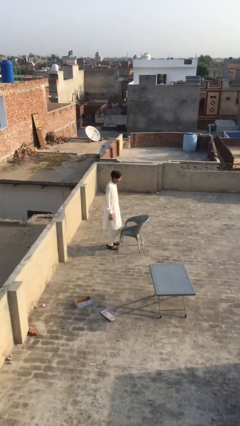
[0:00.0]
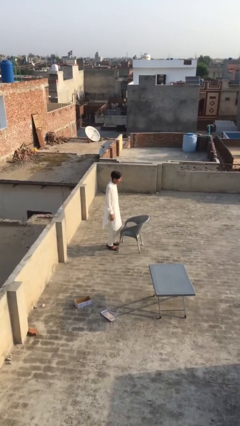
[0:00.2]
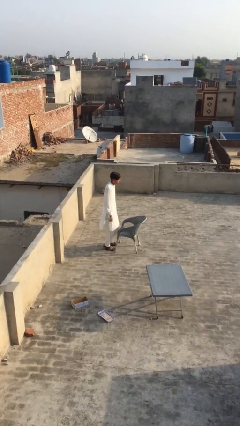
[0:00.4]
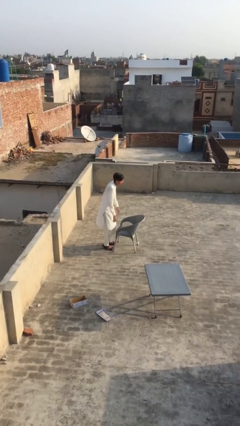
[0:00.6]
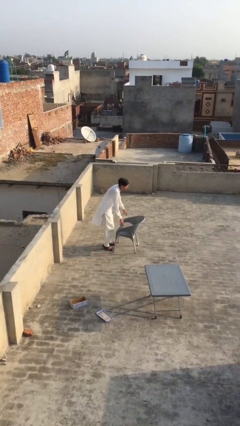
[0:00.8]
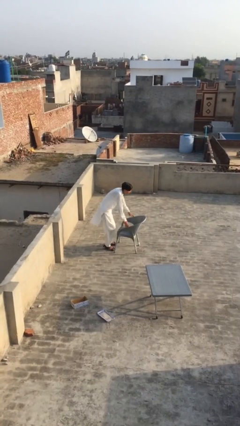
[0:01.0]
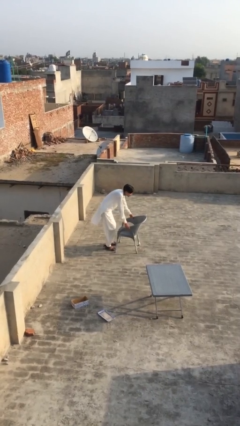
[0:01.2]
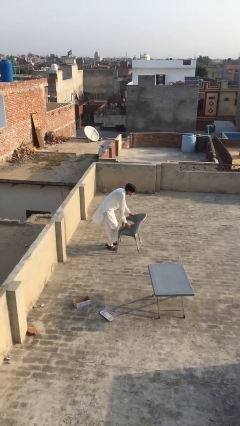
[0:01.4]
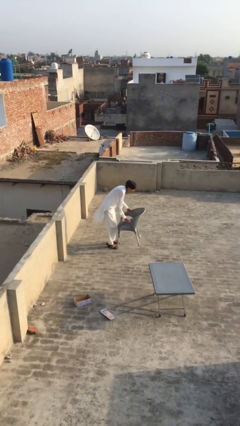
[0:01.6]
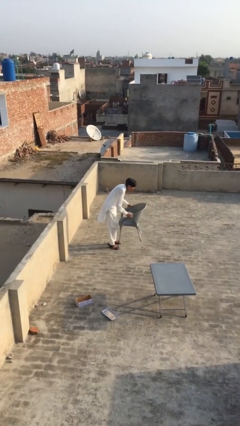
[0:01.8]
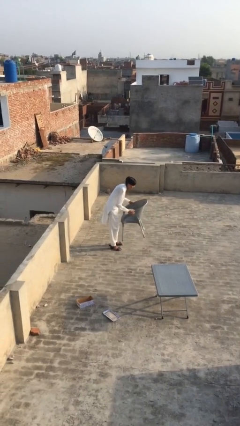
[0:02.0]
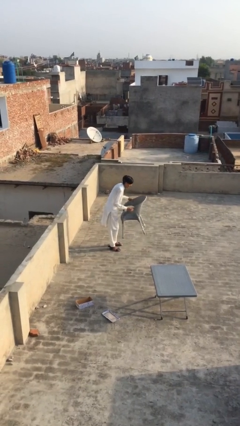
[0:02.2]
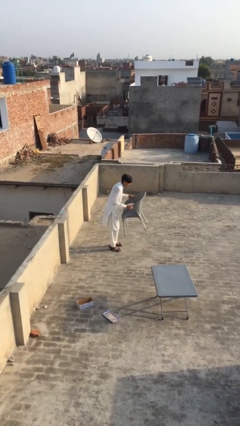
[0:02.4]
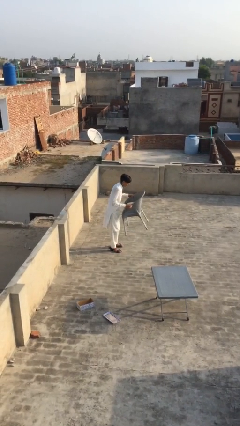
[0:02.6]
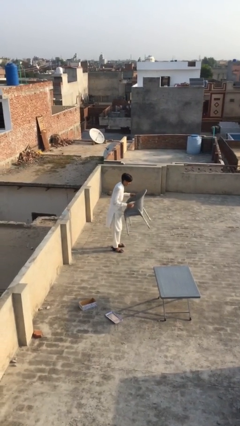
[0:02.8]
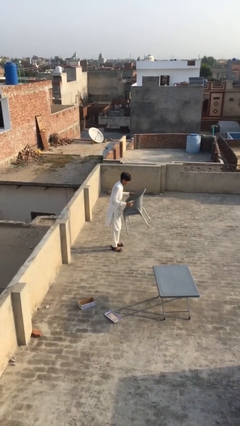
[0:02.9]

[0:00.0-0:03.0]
person picks up object from floor

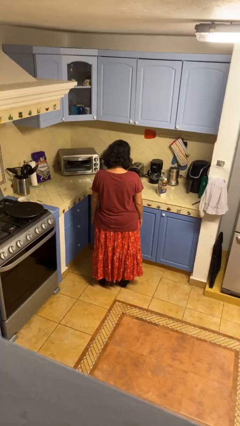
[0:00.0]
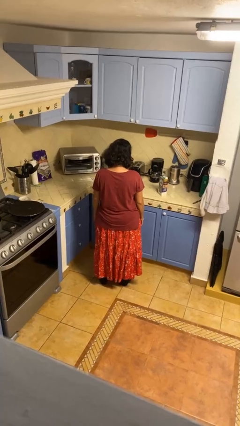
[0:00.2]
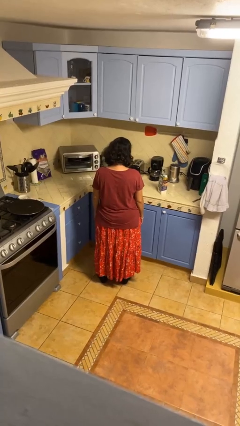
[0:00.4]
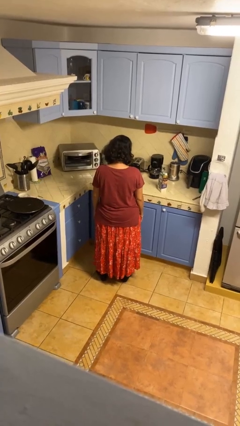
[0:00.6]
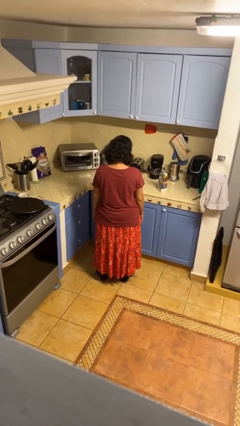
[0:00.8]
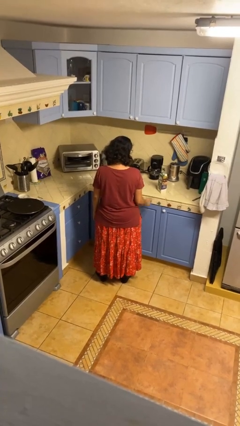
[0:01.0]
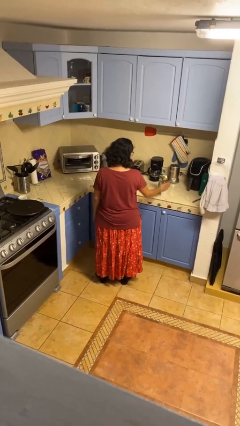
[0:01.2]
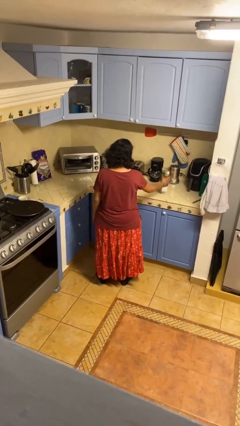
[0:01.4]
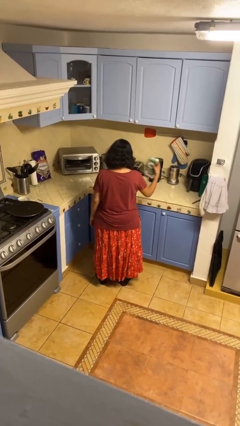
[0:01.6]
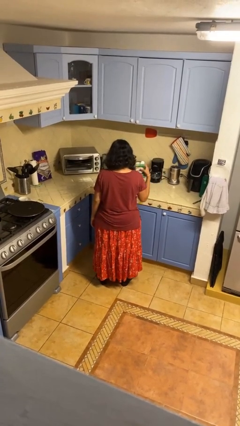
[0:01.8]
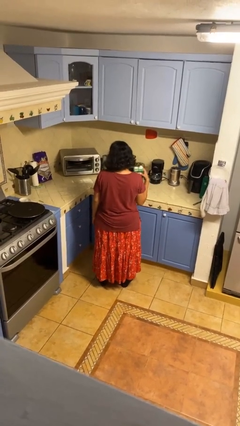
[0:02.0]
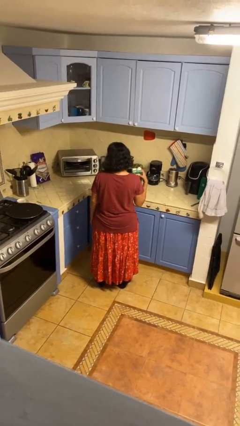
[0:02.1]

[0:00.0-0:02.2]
person picks up object from countertop

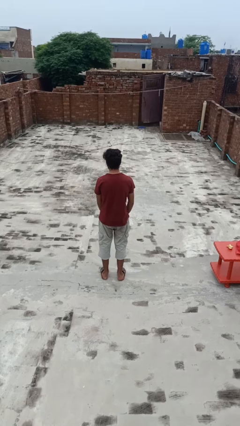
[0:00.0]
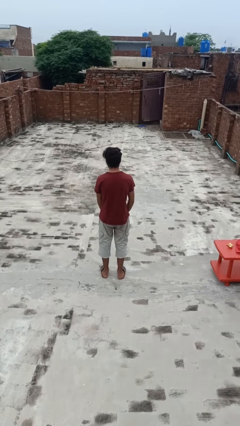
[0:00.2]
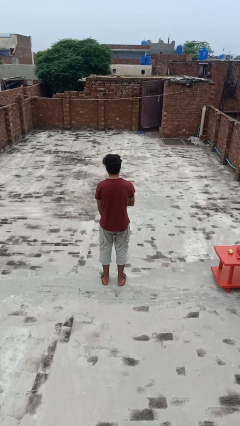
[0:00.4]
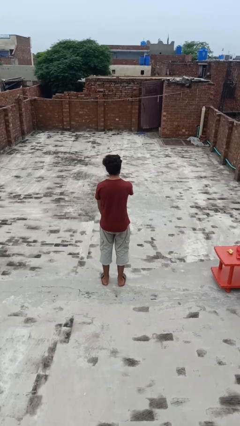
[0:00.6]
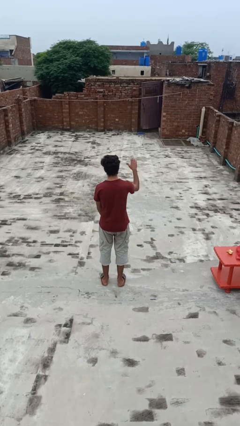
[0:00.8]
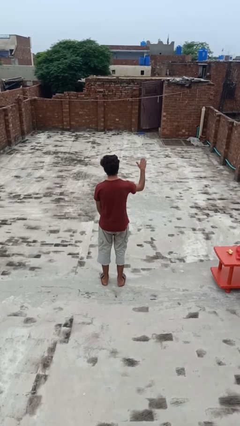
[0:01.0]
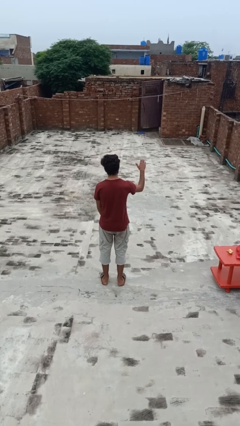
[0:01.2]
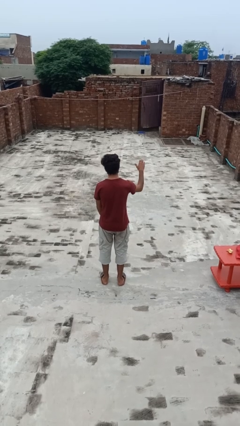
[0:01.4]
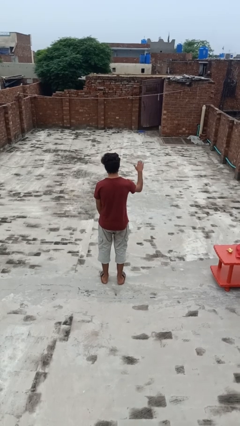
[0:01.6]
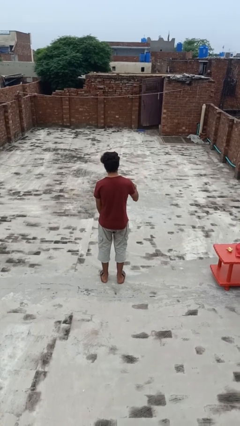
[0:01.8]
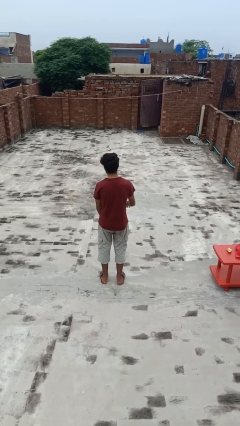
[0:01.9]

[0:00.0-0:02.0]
person gestures cut

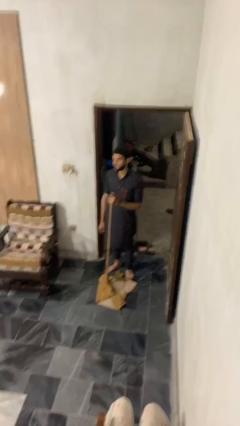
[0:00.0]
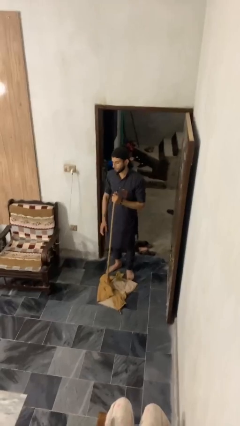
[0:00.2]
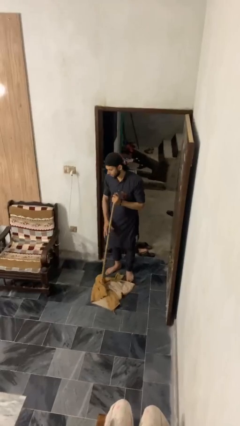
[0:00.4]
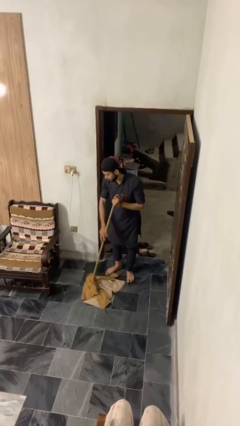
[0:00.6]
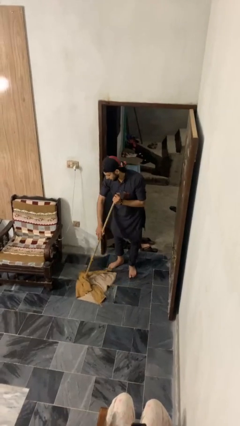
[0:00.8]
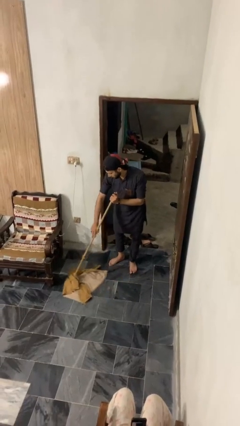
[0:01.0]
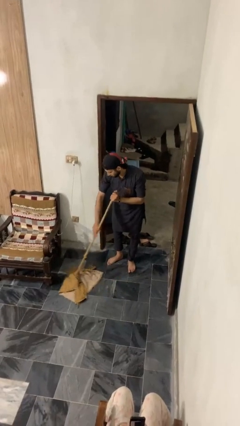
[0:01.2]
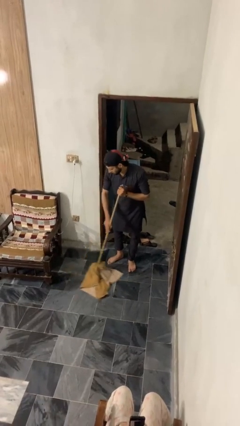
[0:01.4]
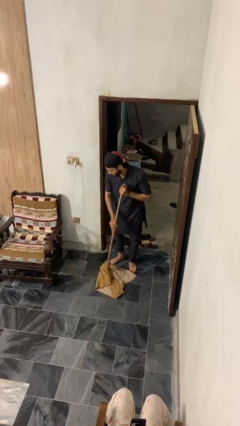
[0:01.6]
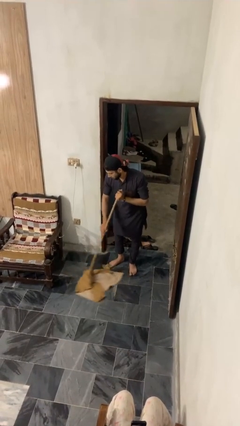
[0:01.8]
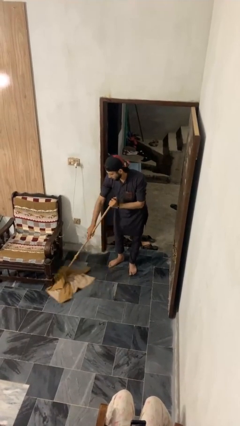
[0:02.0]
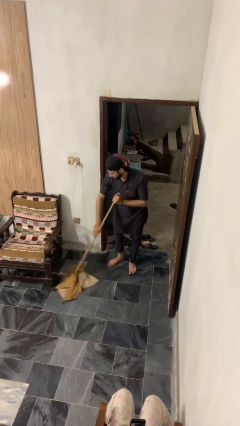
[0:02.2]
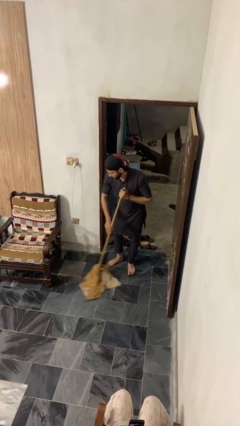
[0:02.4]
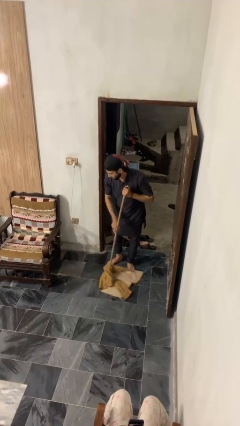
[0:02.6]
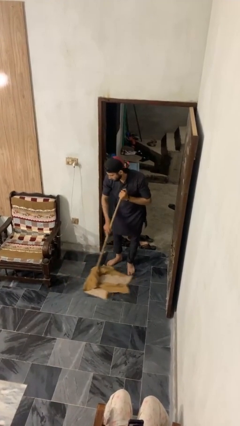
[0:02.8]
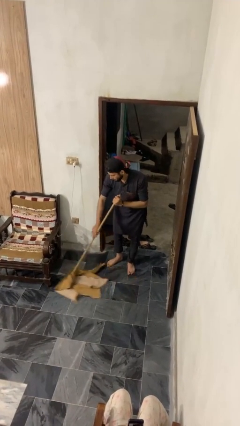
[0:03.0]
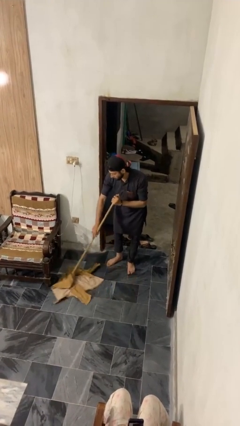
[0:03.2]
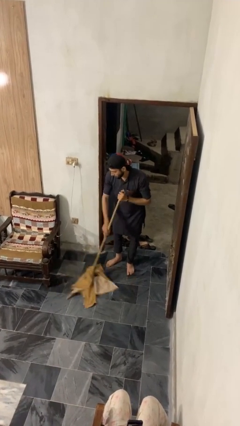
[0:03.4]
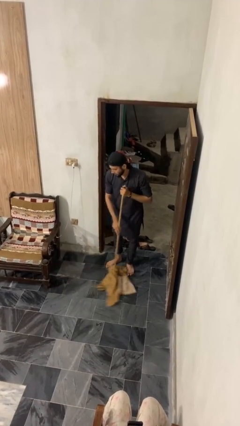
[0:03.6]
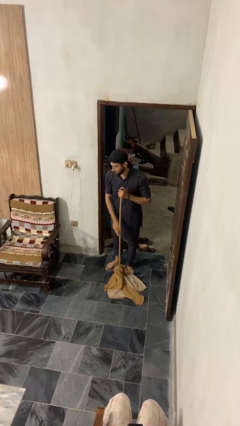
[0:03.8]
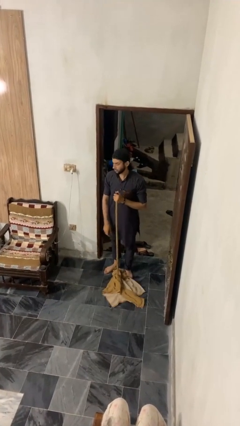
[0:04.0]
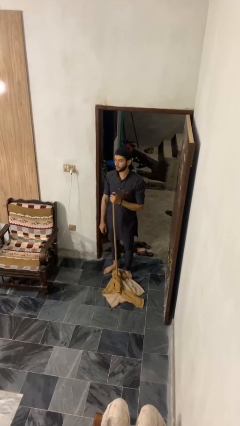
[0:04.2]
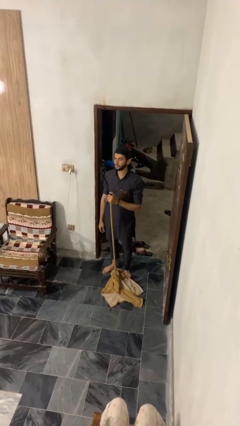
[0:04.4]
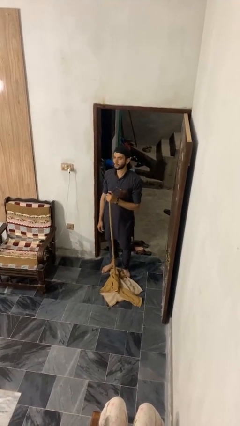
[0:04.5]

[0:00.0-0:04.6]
person mops

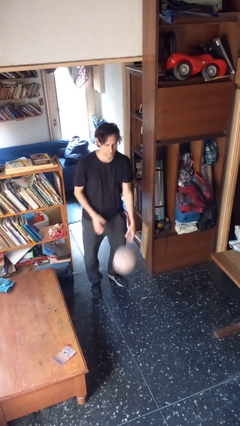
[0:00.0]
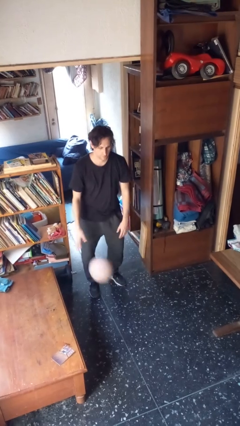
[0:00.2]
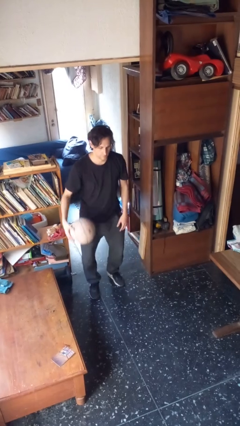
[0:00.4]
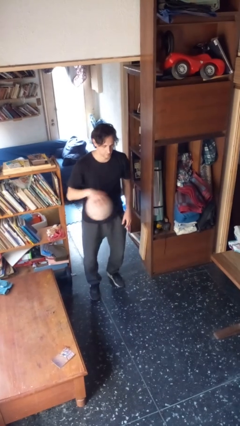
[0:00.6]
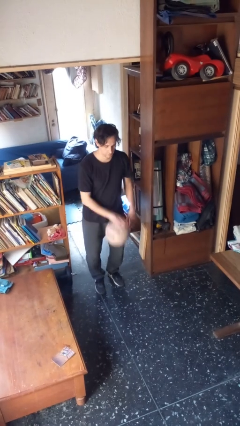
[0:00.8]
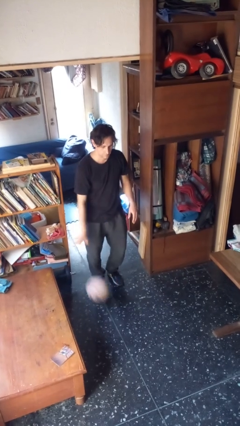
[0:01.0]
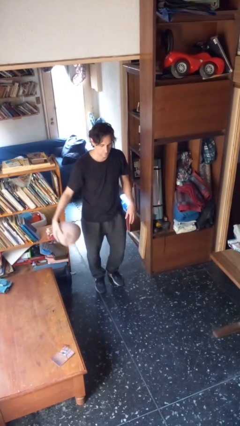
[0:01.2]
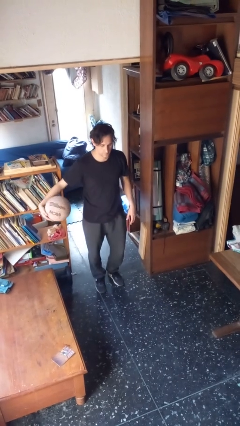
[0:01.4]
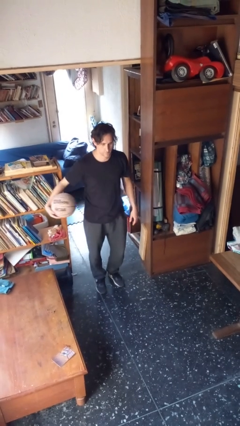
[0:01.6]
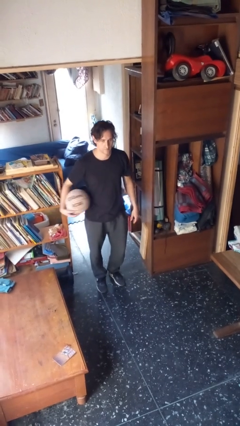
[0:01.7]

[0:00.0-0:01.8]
person bounces ball on floor

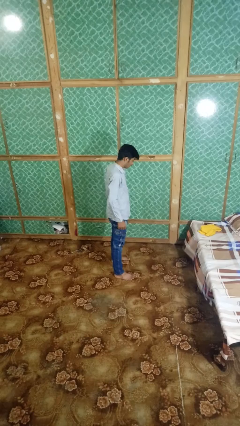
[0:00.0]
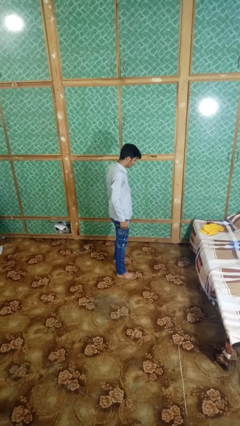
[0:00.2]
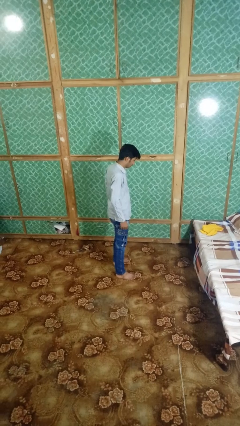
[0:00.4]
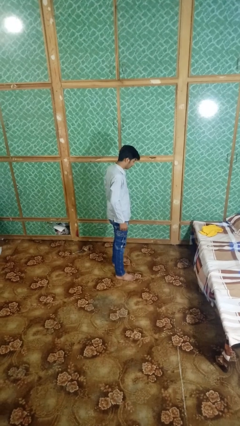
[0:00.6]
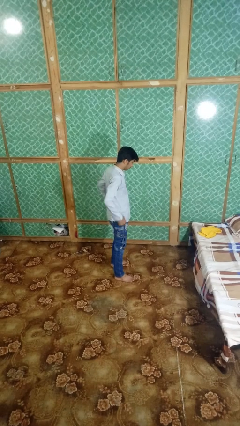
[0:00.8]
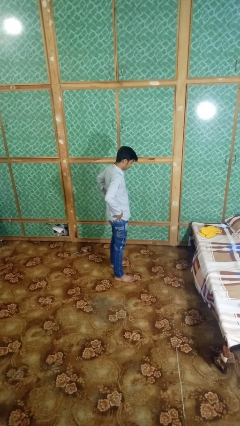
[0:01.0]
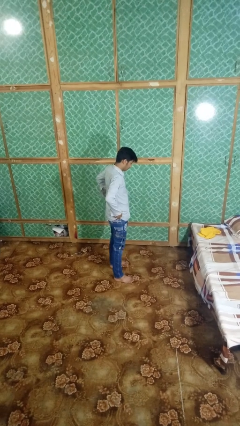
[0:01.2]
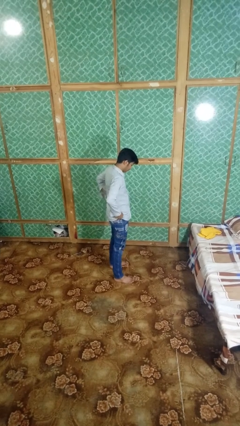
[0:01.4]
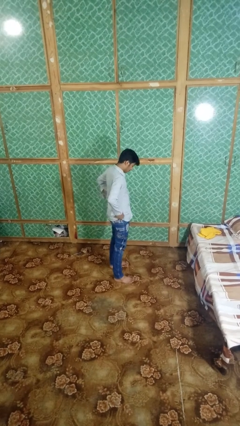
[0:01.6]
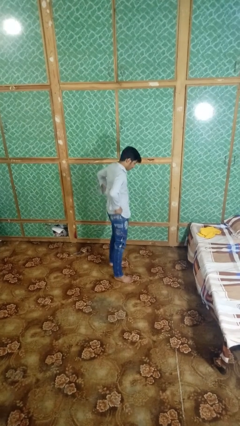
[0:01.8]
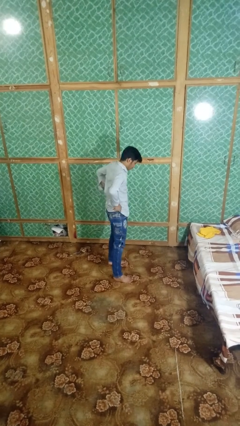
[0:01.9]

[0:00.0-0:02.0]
person hikes up pants

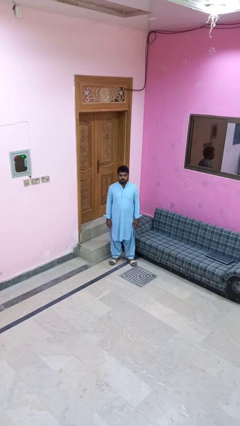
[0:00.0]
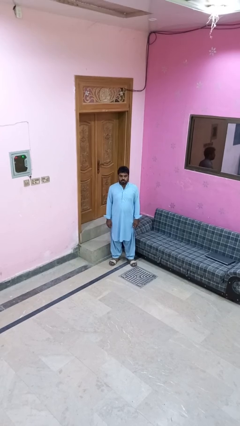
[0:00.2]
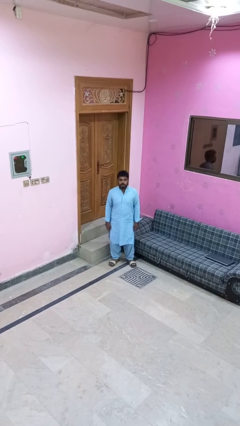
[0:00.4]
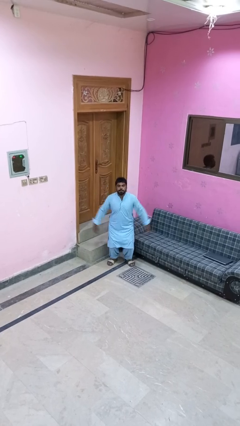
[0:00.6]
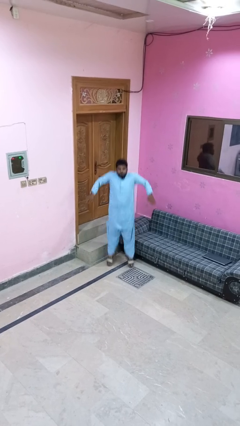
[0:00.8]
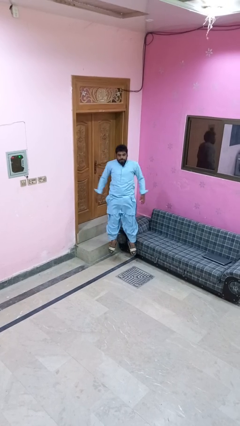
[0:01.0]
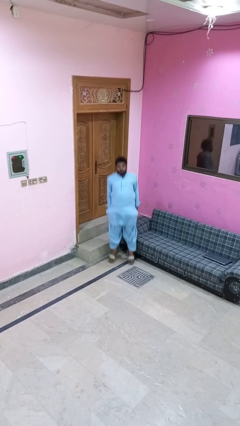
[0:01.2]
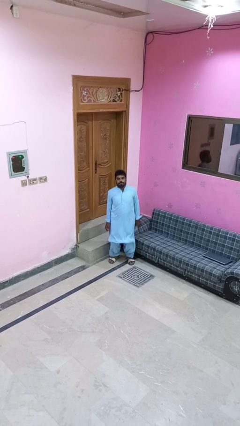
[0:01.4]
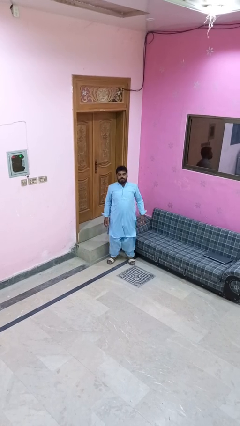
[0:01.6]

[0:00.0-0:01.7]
person jumps

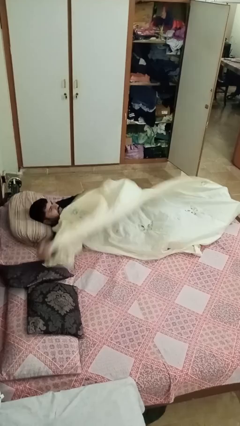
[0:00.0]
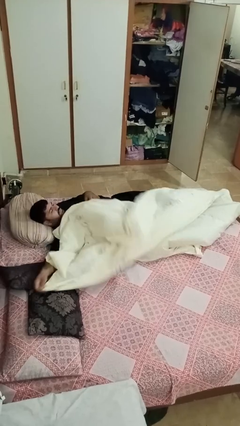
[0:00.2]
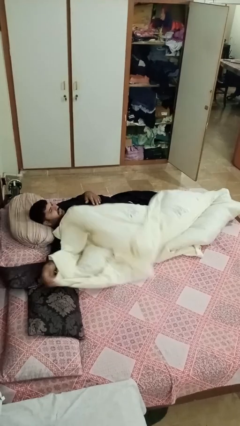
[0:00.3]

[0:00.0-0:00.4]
person uncovers with bedsheets
